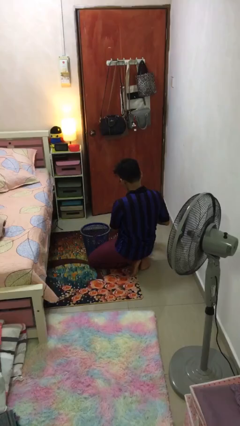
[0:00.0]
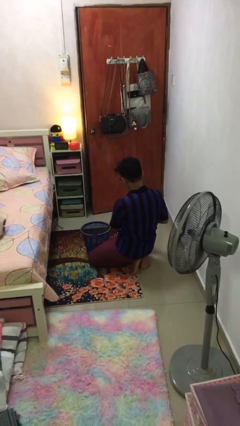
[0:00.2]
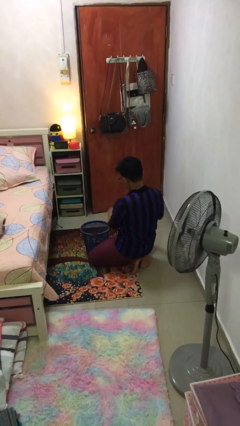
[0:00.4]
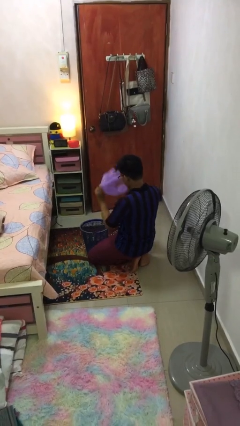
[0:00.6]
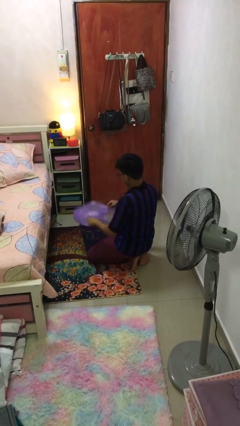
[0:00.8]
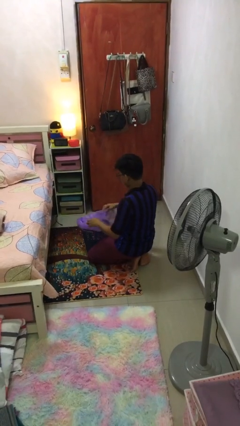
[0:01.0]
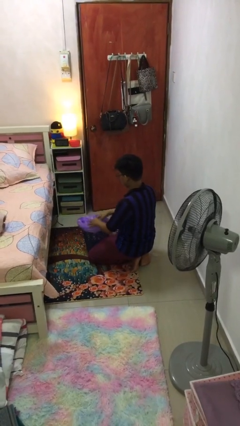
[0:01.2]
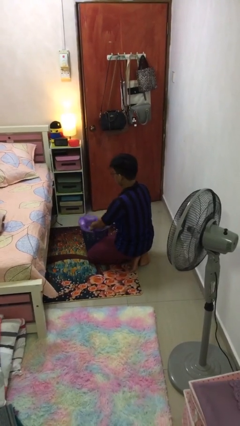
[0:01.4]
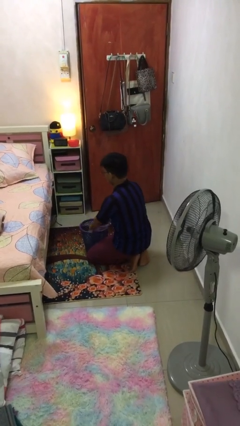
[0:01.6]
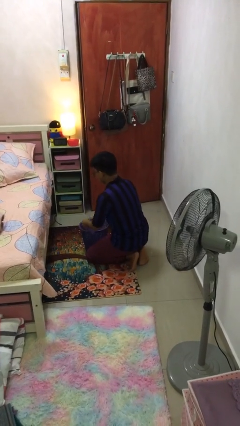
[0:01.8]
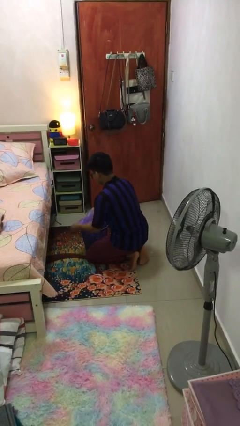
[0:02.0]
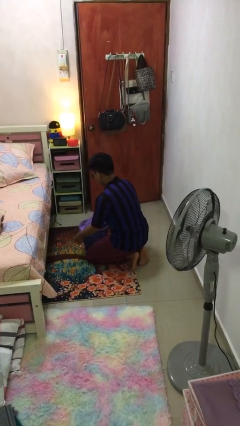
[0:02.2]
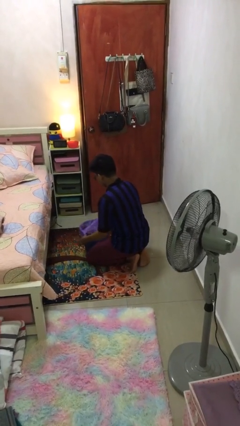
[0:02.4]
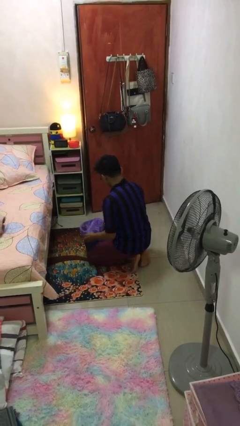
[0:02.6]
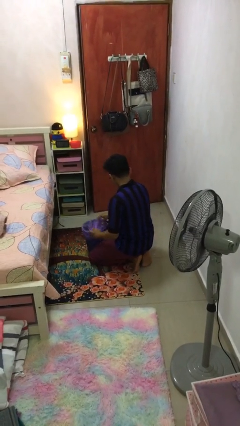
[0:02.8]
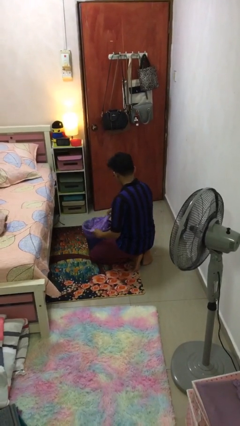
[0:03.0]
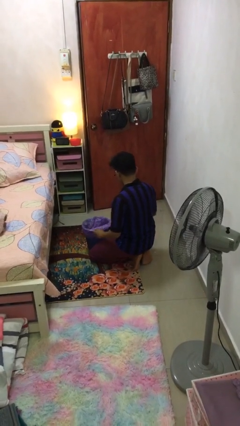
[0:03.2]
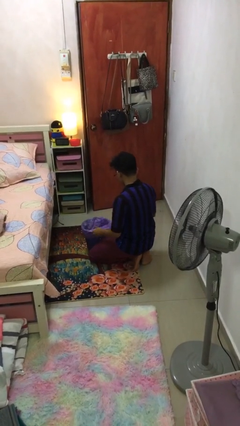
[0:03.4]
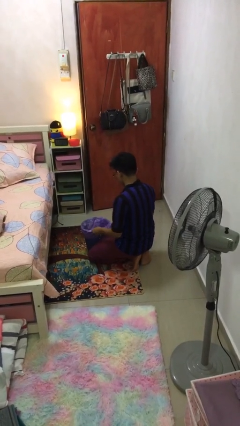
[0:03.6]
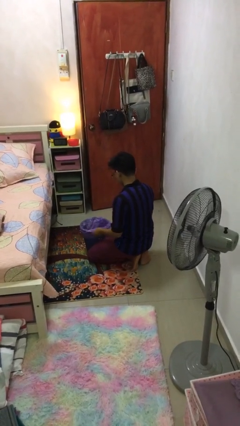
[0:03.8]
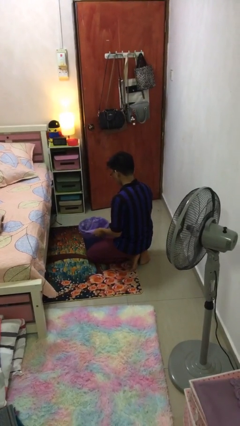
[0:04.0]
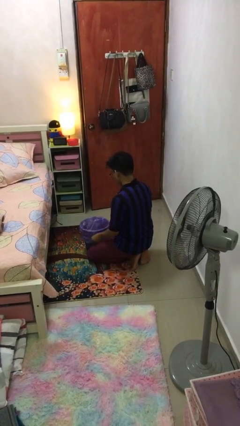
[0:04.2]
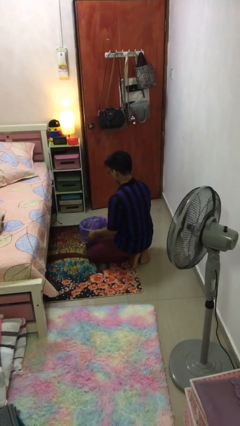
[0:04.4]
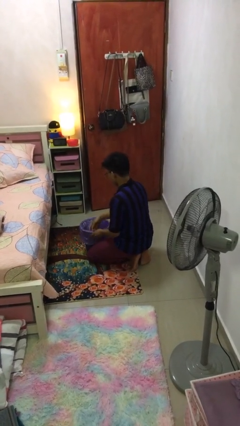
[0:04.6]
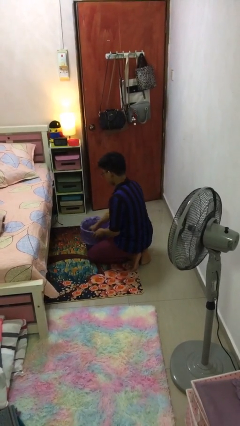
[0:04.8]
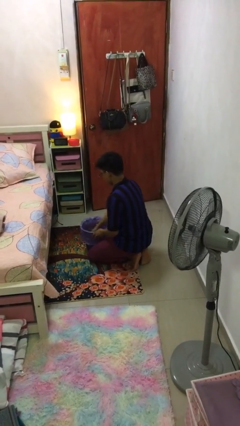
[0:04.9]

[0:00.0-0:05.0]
person inserts trashbag into trashcan

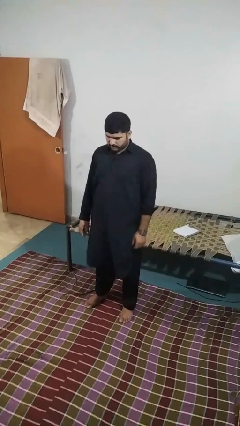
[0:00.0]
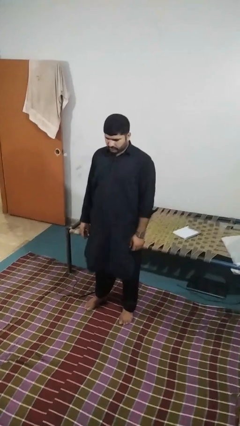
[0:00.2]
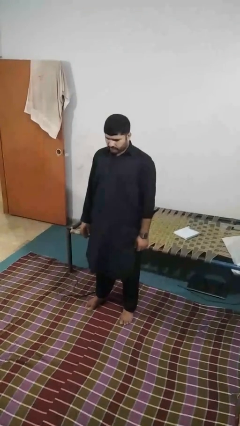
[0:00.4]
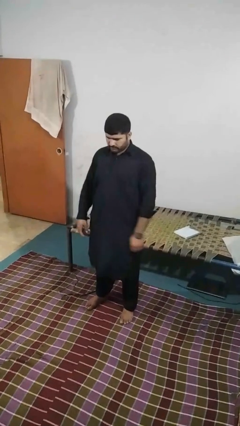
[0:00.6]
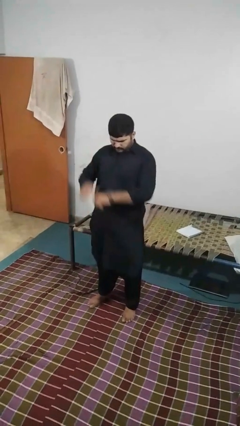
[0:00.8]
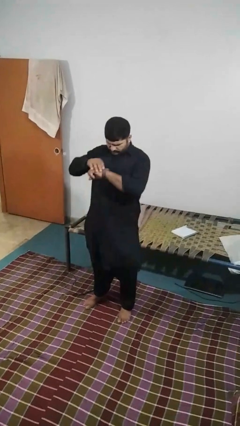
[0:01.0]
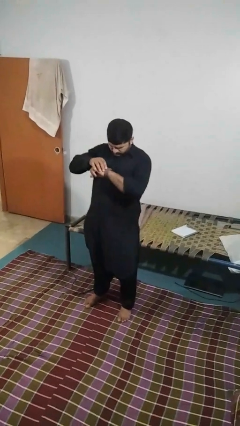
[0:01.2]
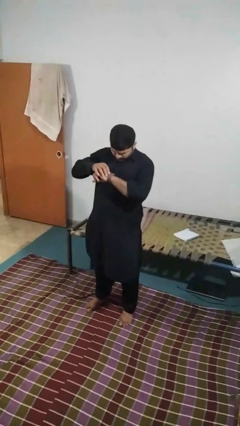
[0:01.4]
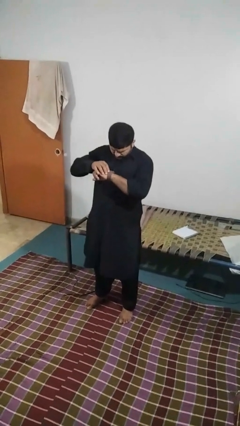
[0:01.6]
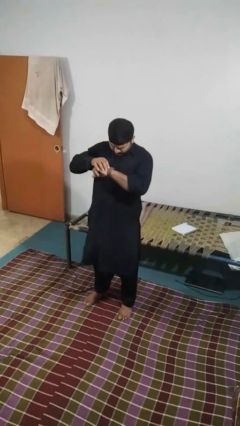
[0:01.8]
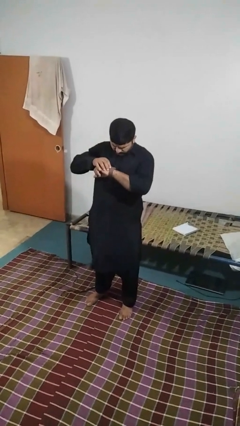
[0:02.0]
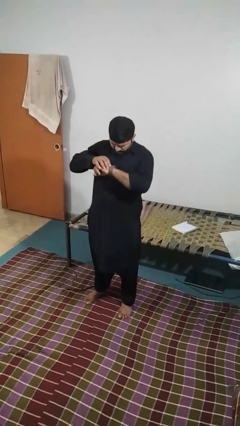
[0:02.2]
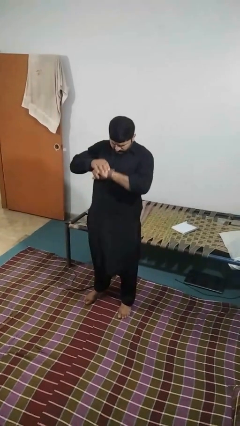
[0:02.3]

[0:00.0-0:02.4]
person looks at wristwatch

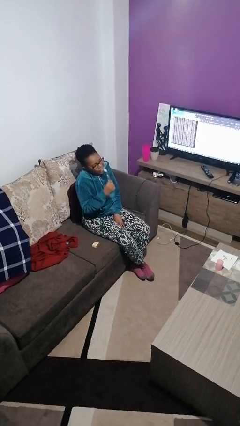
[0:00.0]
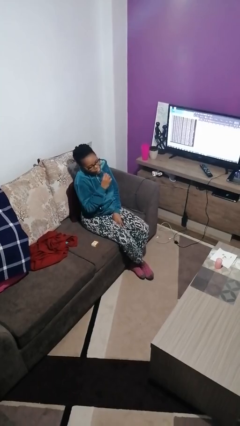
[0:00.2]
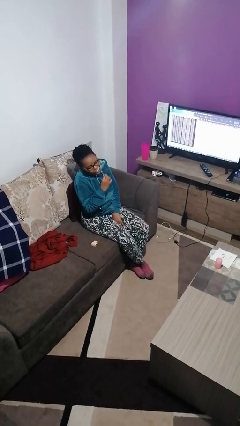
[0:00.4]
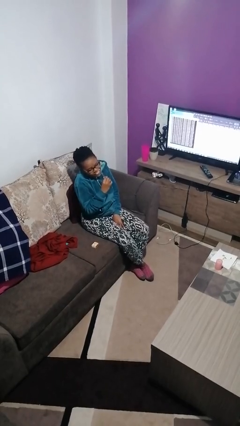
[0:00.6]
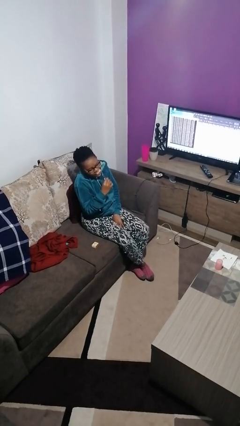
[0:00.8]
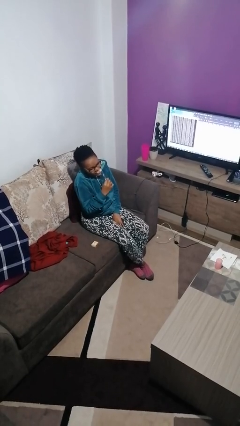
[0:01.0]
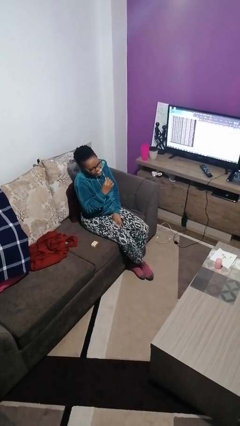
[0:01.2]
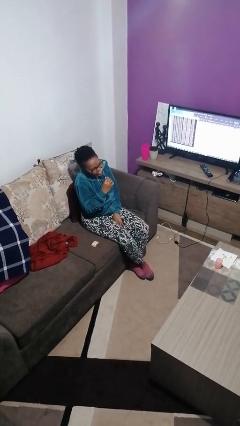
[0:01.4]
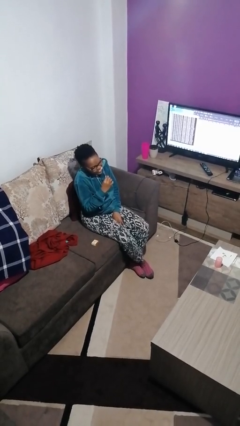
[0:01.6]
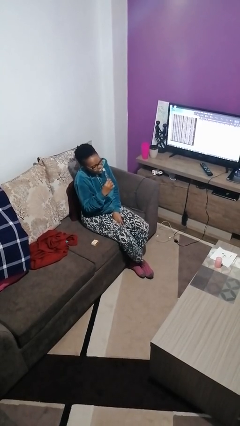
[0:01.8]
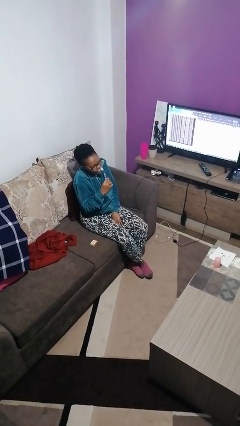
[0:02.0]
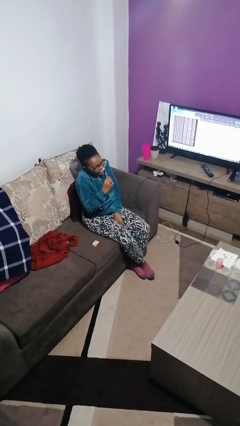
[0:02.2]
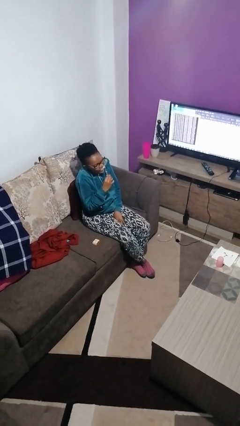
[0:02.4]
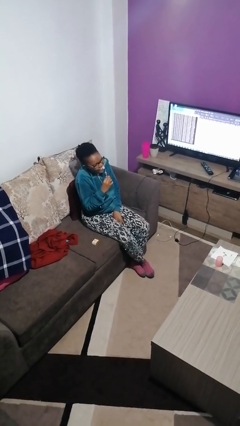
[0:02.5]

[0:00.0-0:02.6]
person brushes teeth

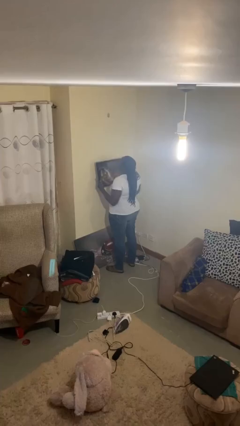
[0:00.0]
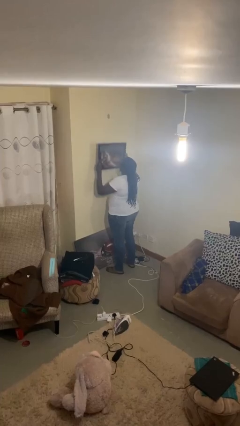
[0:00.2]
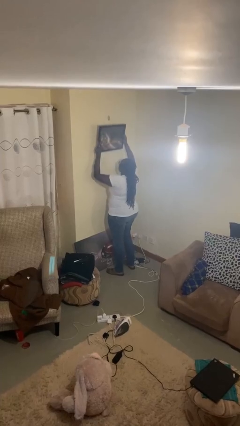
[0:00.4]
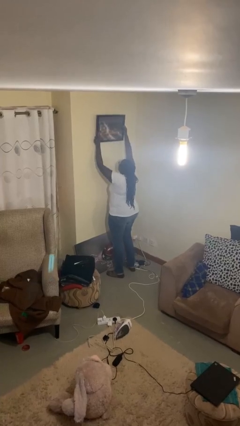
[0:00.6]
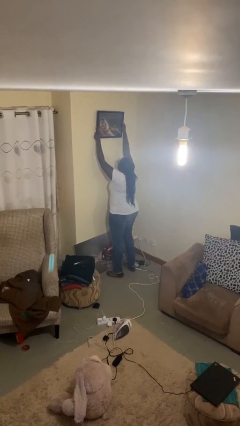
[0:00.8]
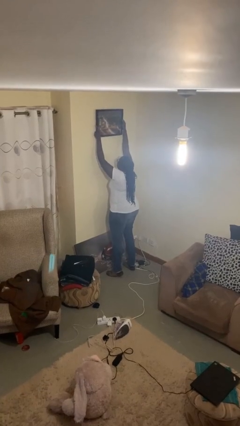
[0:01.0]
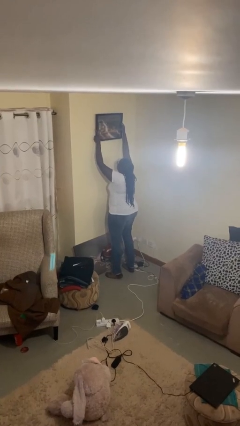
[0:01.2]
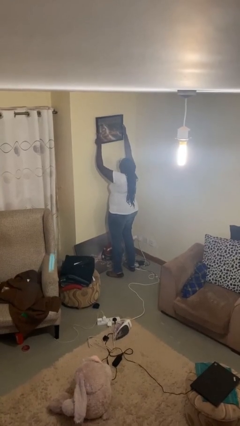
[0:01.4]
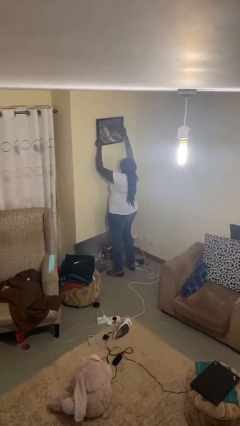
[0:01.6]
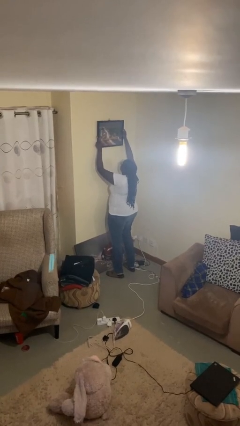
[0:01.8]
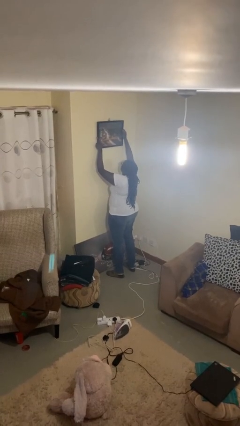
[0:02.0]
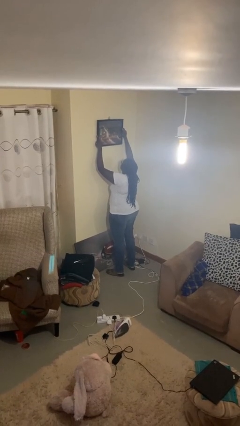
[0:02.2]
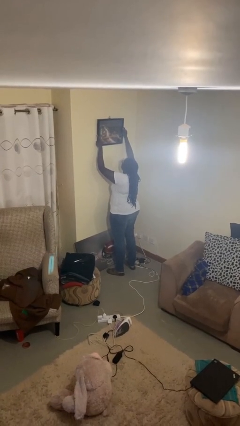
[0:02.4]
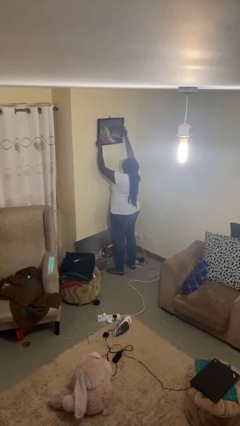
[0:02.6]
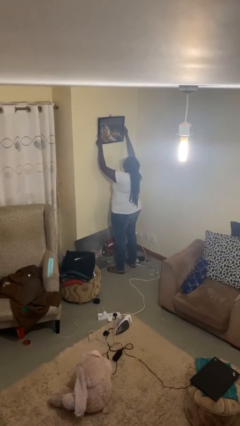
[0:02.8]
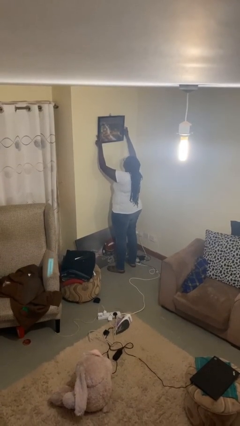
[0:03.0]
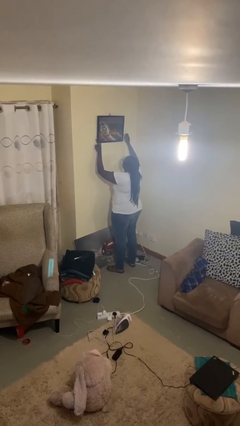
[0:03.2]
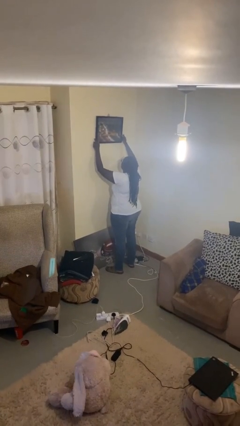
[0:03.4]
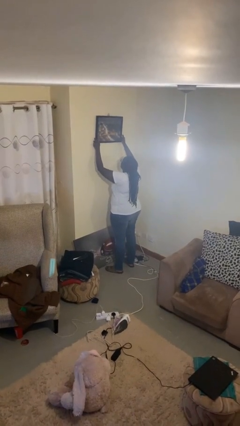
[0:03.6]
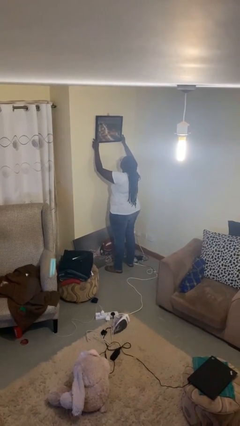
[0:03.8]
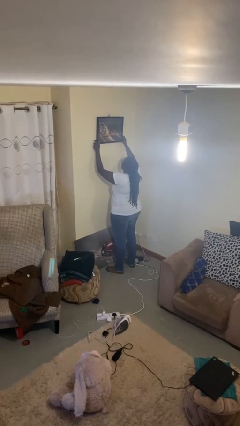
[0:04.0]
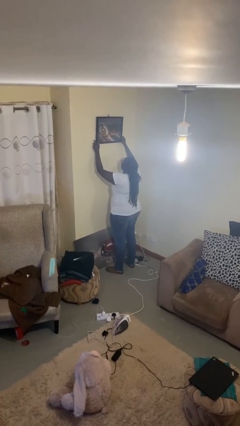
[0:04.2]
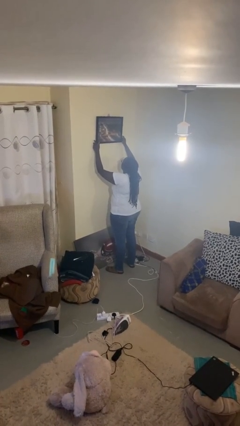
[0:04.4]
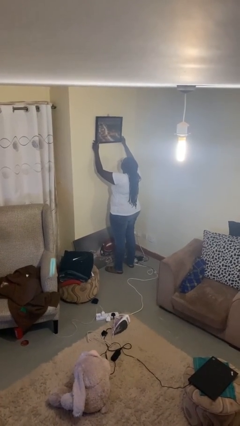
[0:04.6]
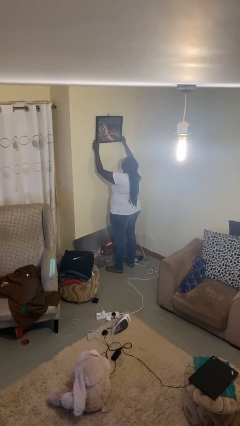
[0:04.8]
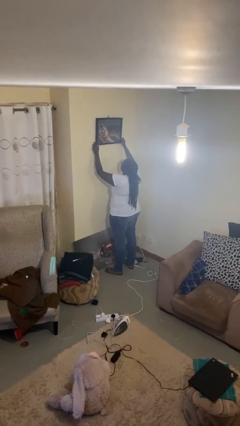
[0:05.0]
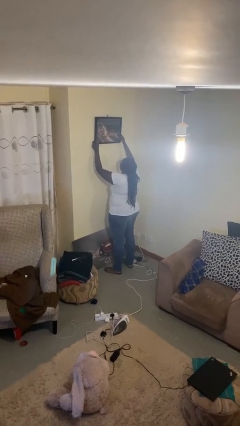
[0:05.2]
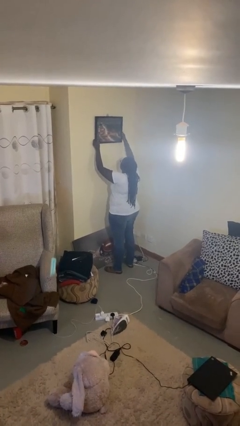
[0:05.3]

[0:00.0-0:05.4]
person puts up picture frame

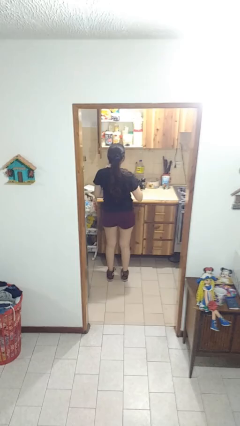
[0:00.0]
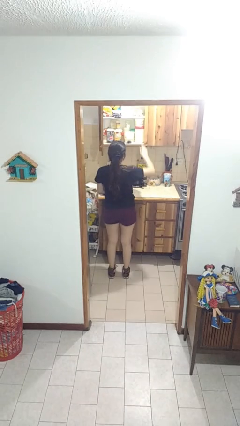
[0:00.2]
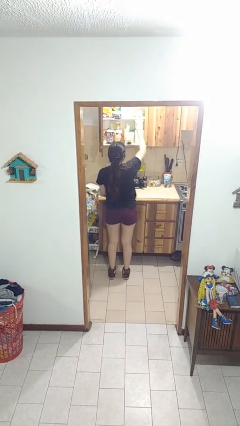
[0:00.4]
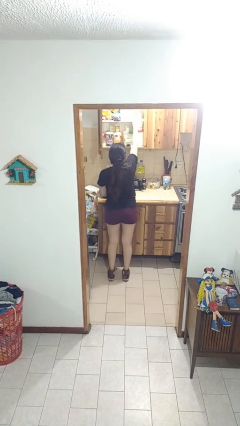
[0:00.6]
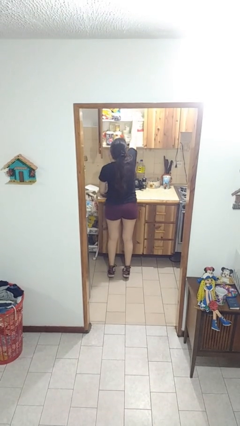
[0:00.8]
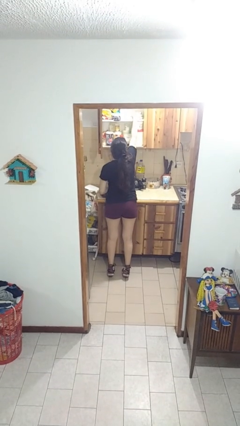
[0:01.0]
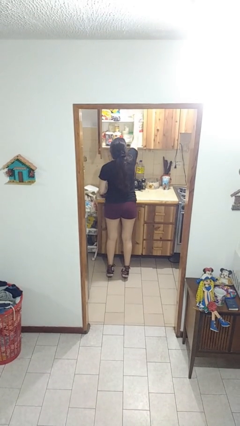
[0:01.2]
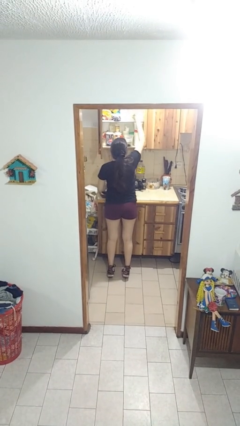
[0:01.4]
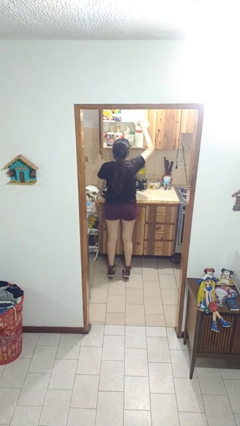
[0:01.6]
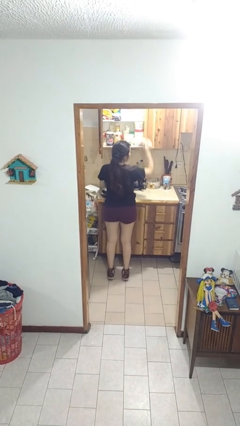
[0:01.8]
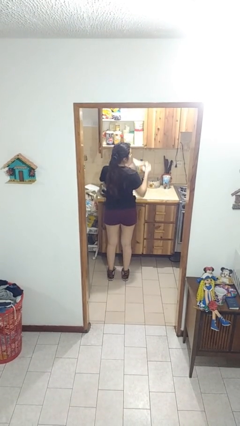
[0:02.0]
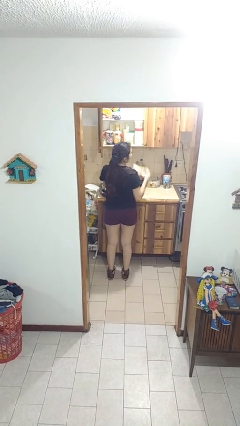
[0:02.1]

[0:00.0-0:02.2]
person takes object from cabinet
